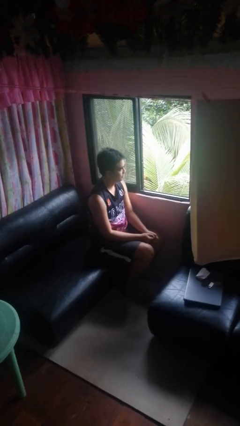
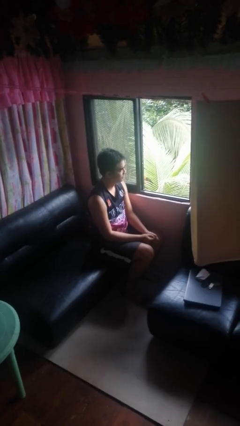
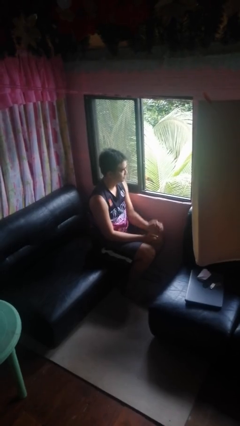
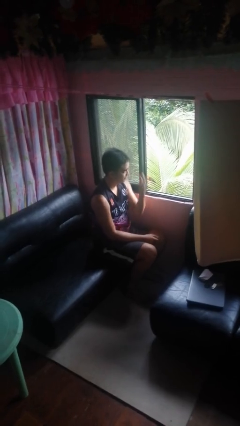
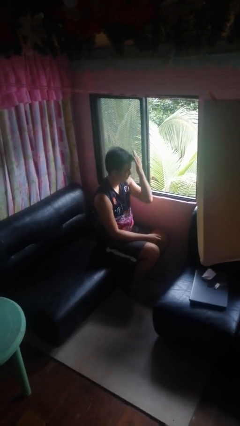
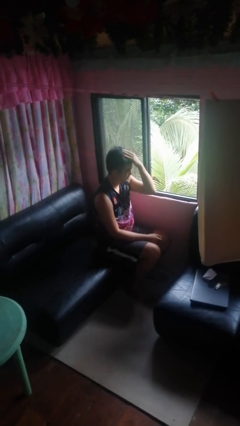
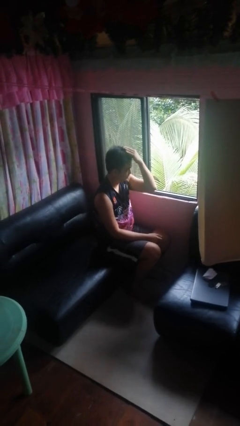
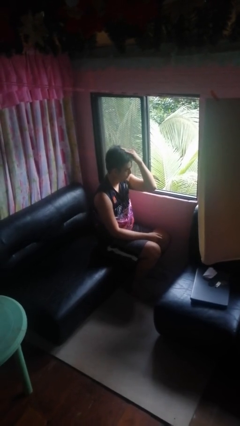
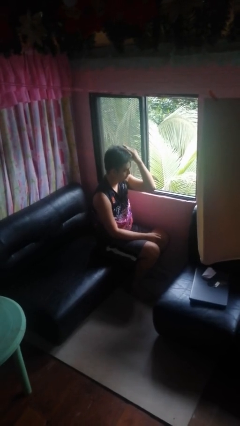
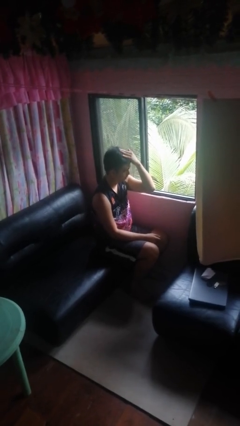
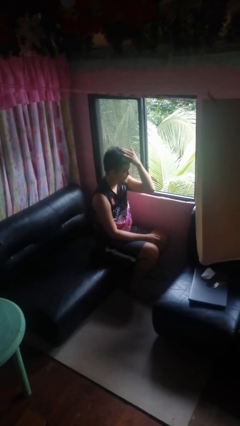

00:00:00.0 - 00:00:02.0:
person pats head

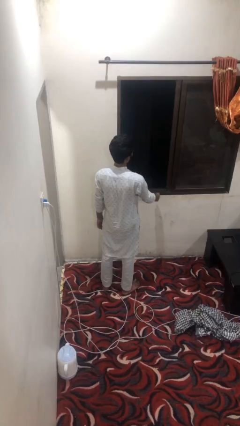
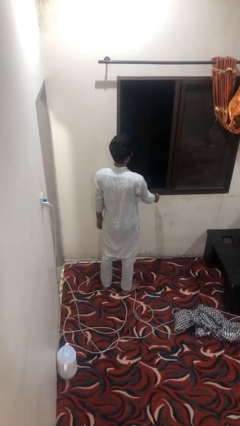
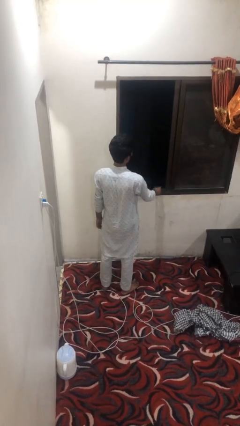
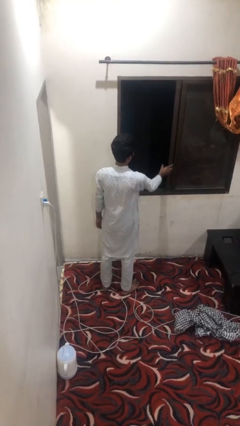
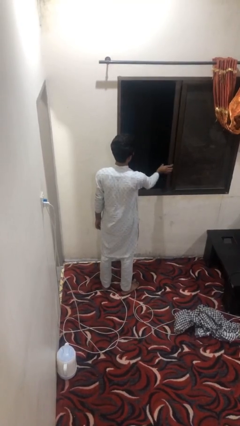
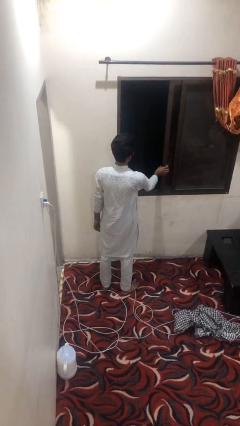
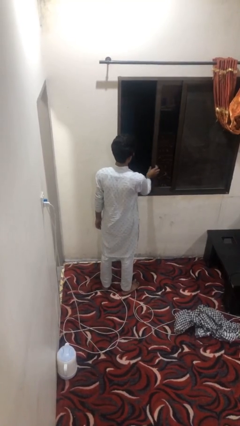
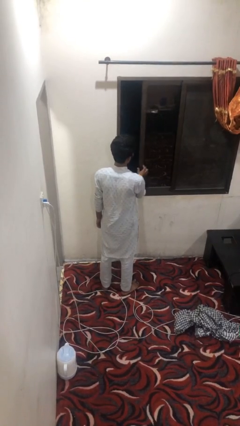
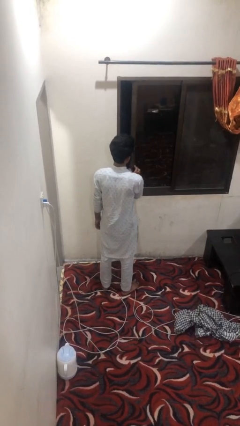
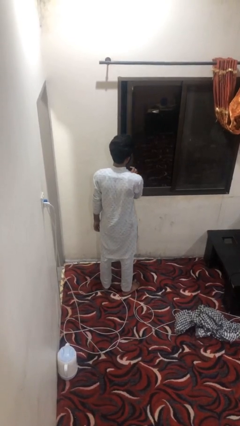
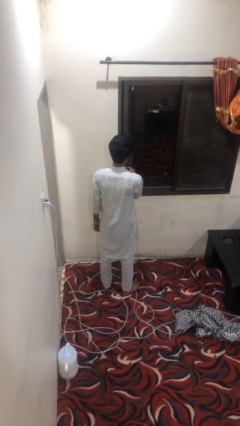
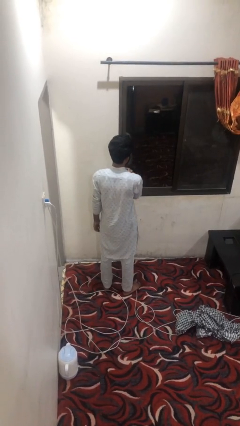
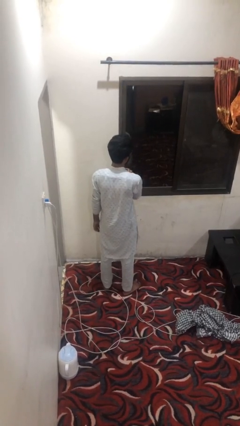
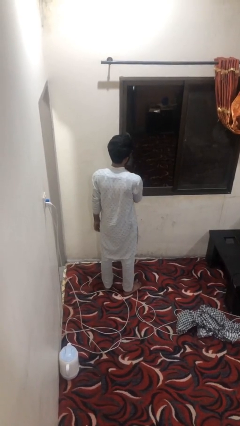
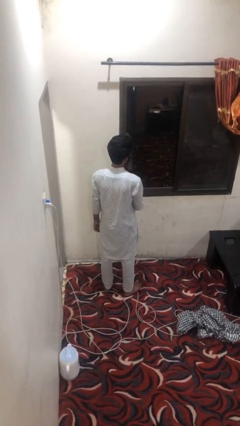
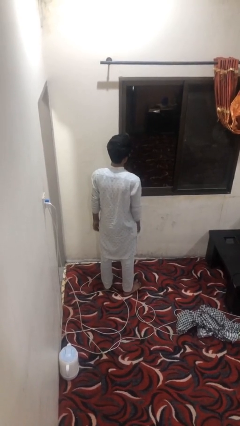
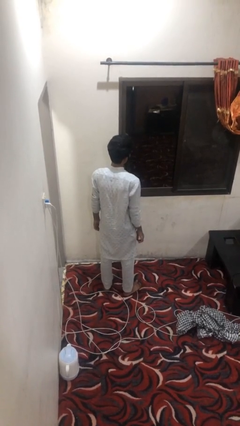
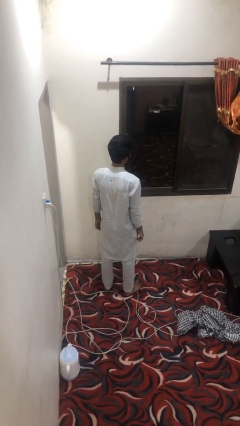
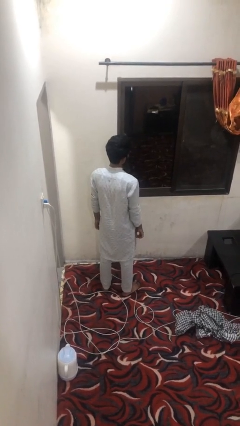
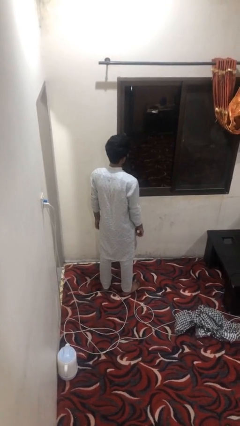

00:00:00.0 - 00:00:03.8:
person closes home window

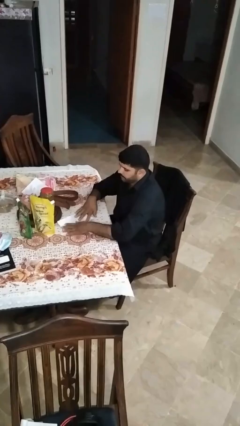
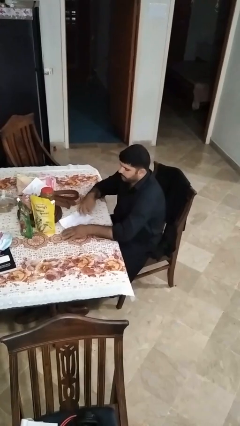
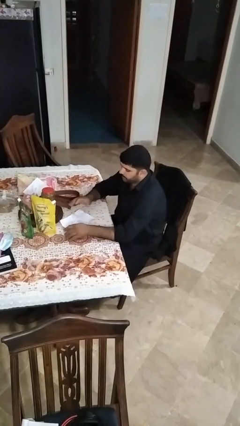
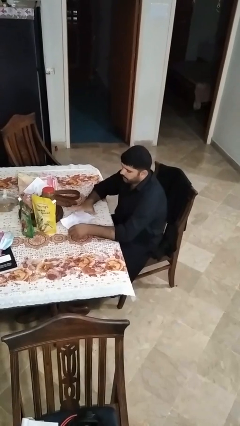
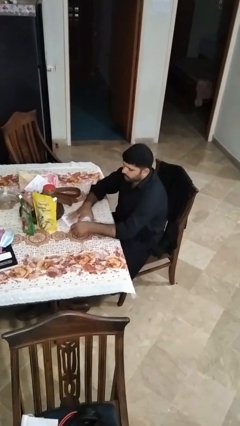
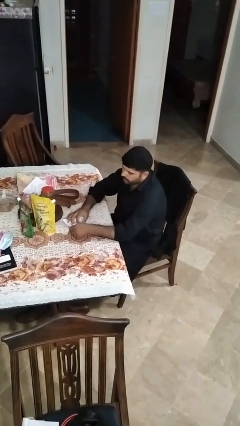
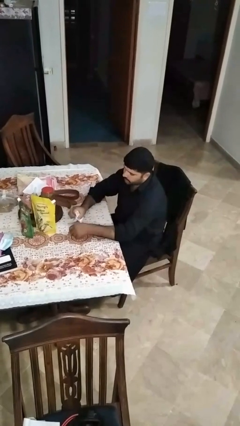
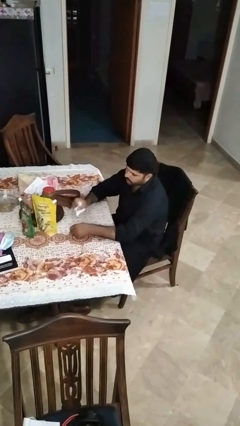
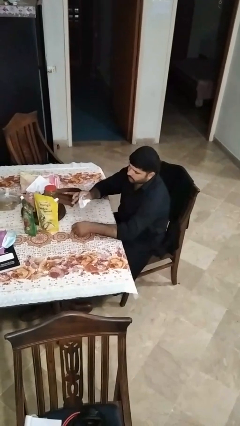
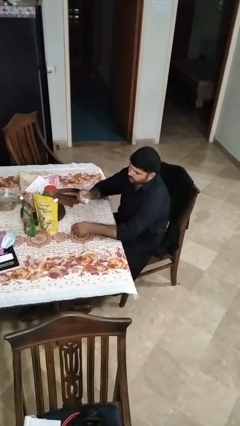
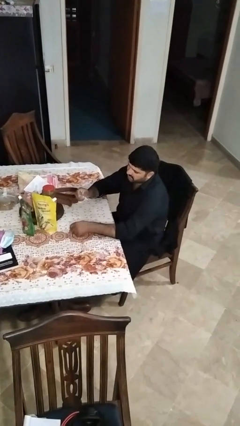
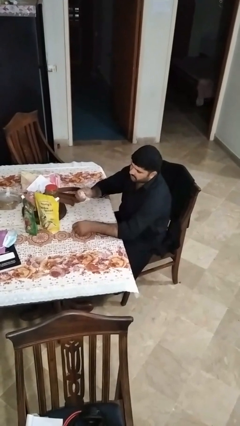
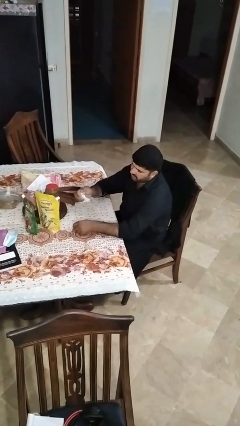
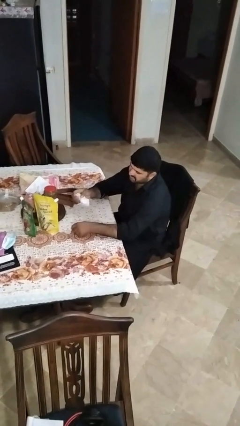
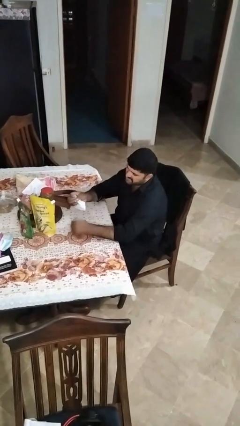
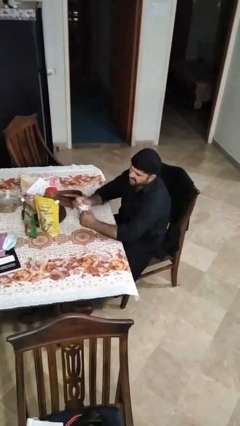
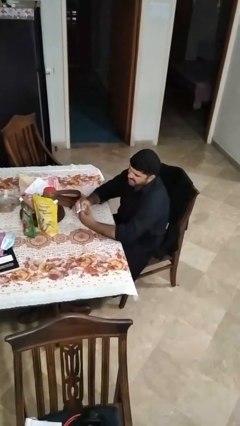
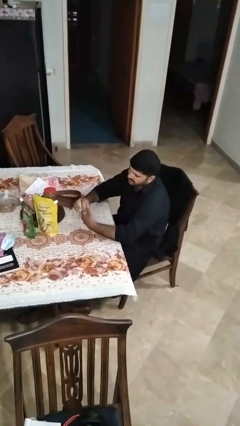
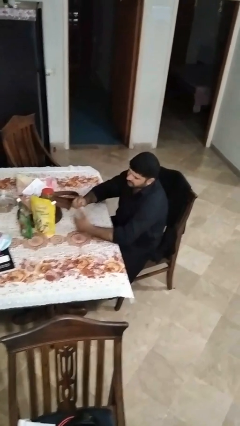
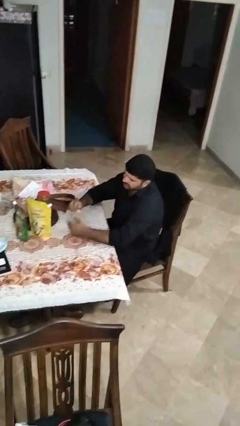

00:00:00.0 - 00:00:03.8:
person crumples paper

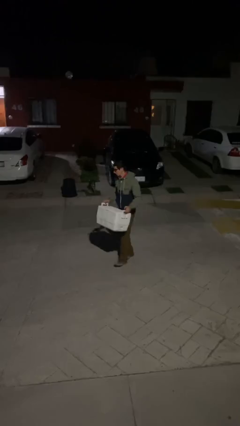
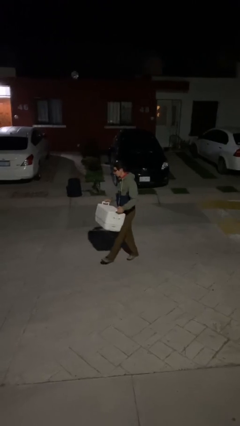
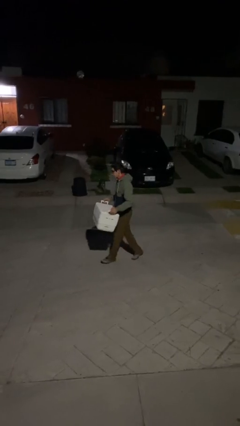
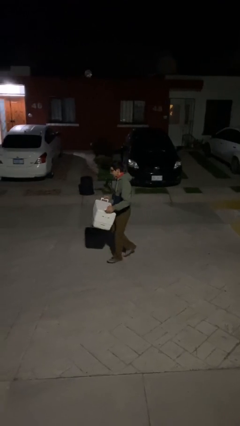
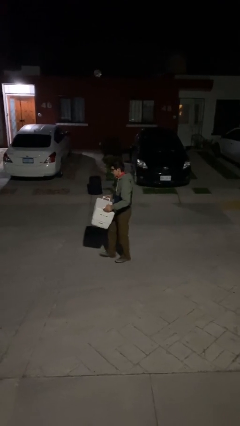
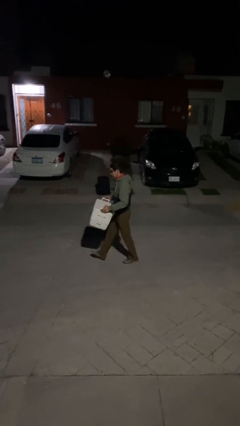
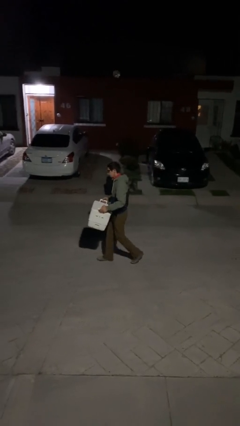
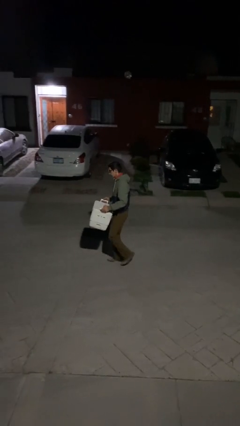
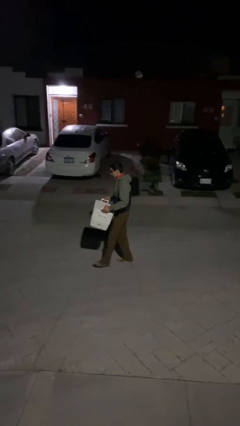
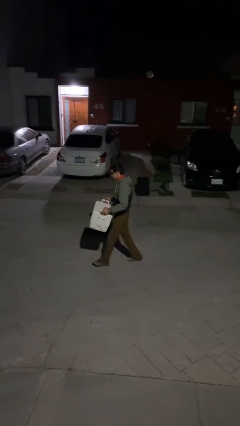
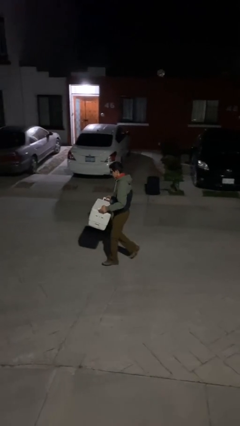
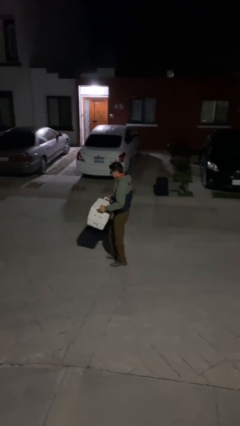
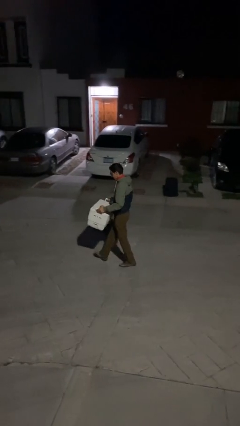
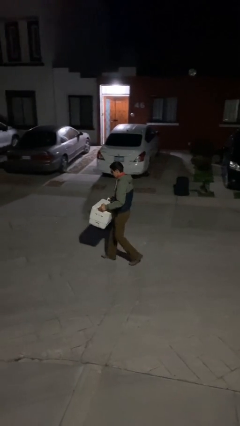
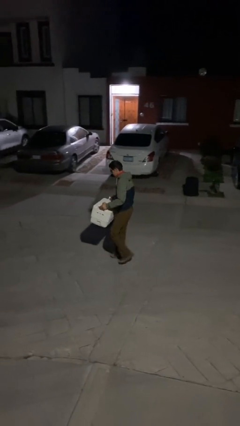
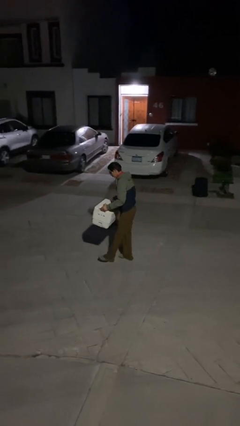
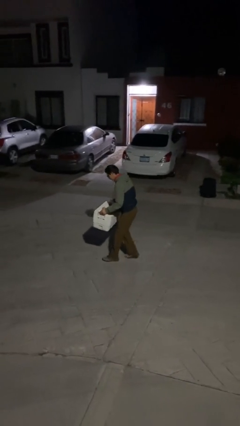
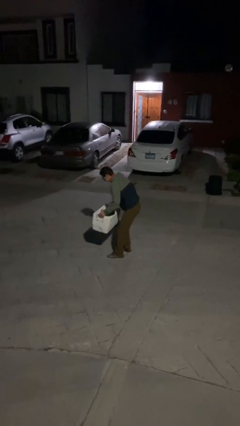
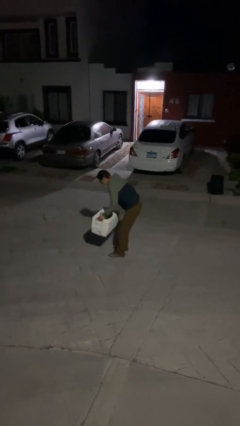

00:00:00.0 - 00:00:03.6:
person carries heavy object

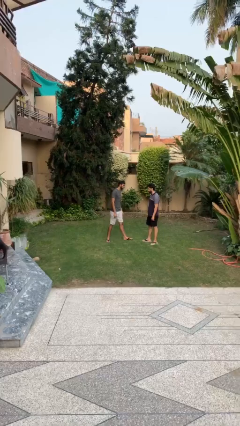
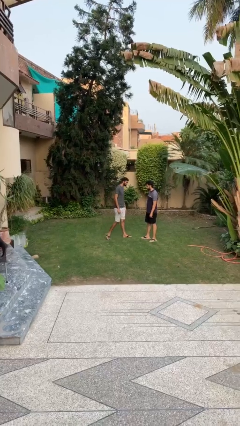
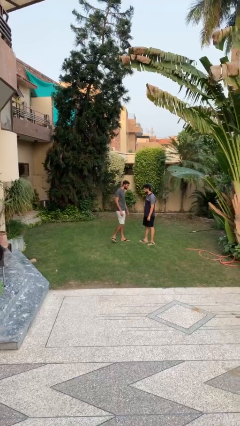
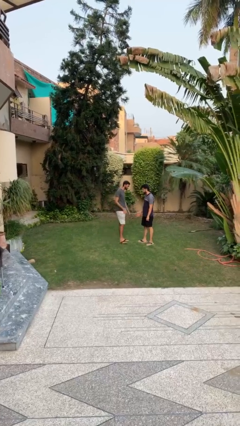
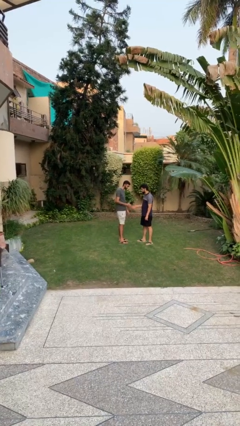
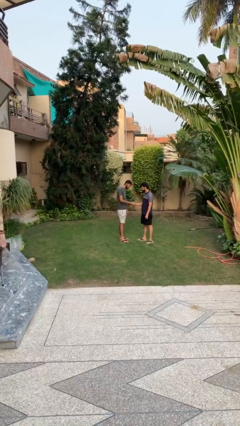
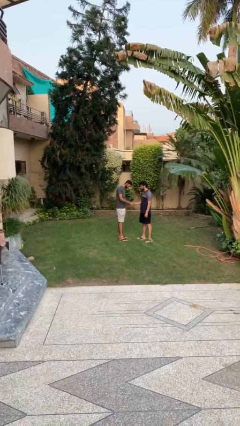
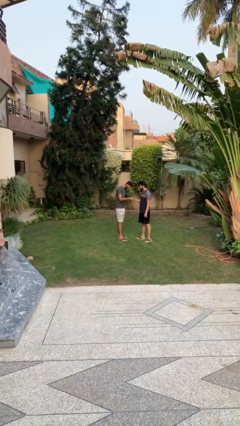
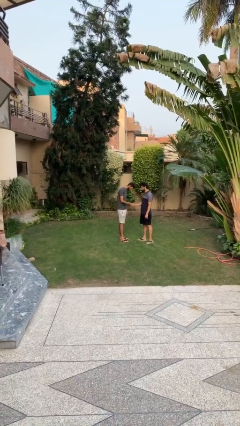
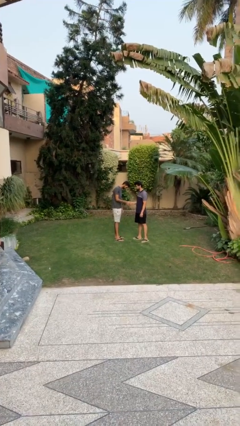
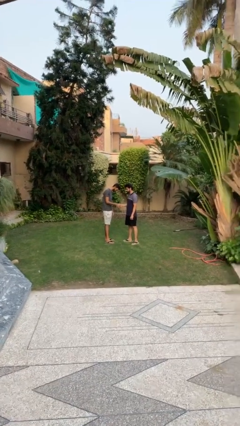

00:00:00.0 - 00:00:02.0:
person shakes hand

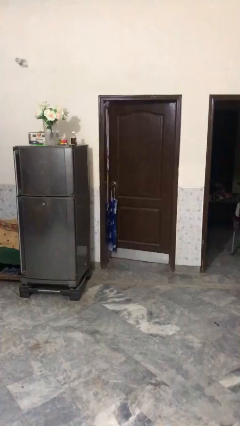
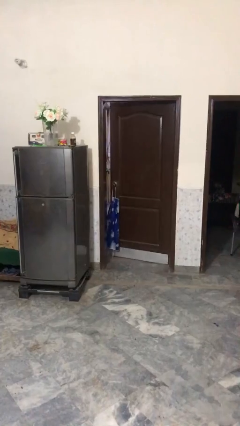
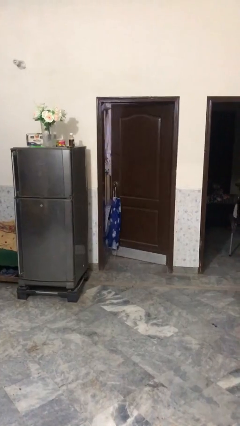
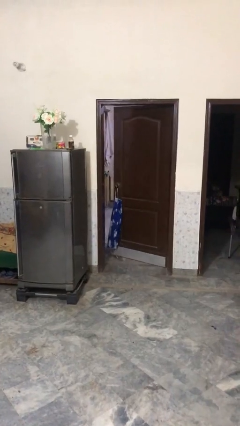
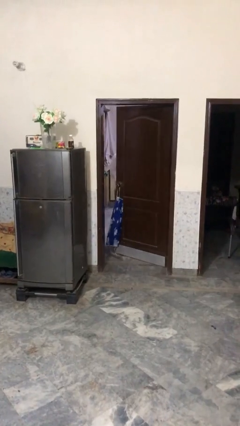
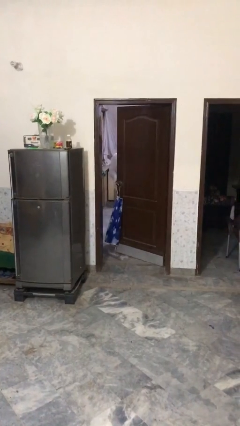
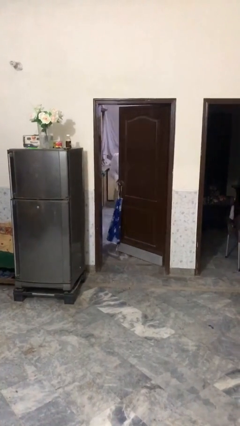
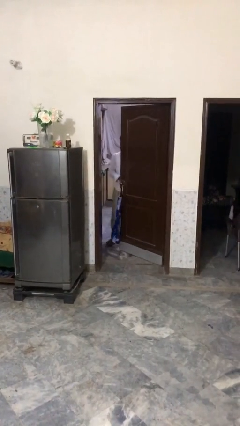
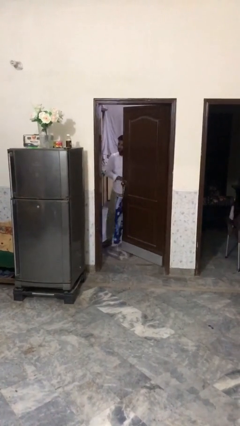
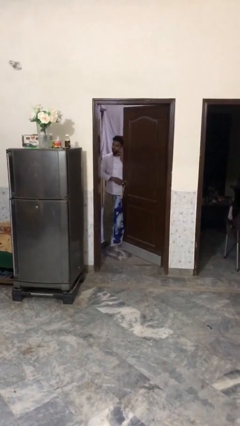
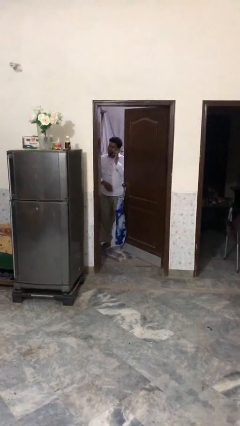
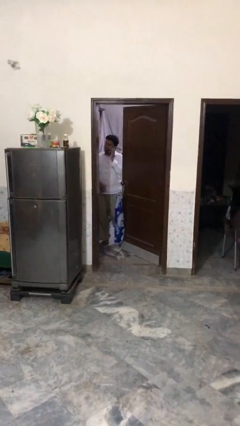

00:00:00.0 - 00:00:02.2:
person opens facility door

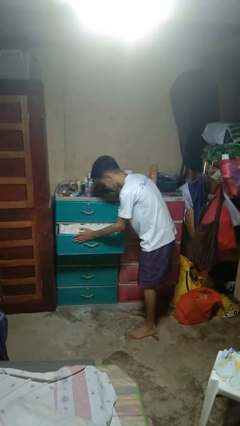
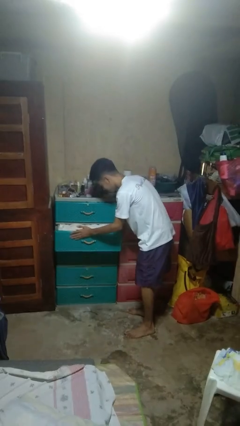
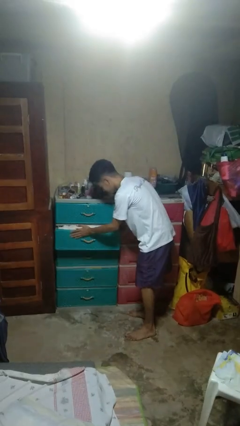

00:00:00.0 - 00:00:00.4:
person closes dresser drawer
